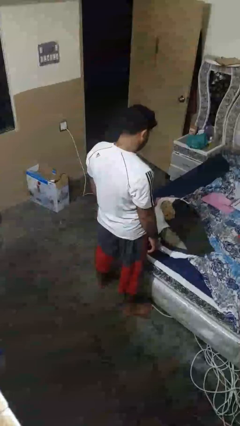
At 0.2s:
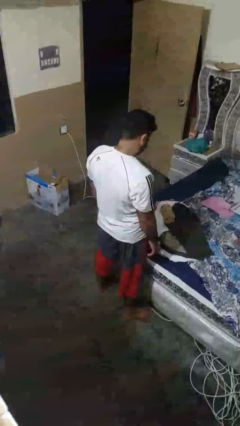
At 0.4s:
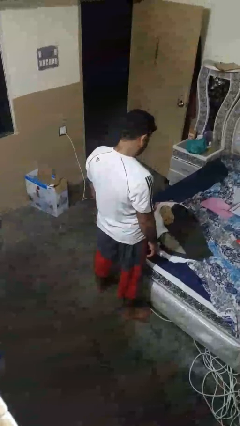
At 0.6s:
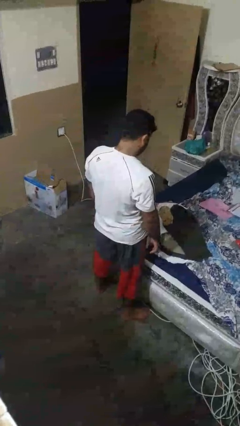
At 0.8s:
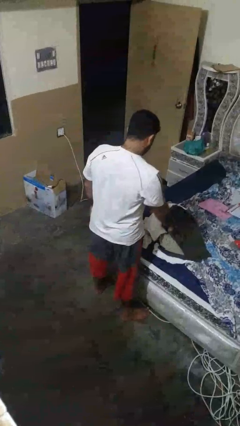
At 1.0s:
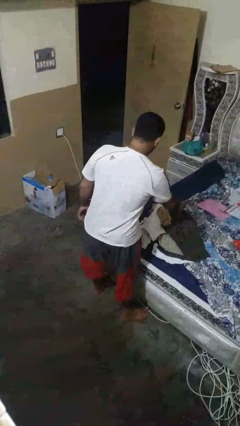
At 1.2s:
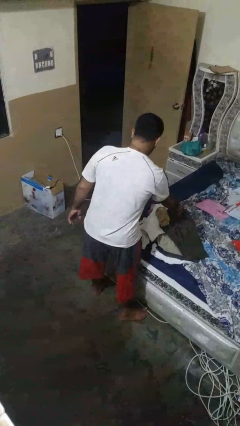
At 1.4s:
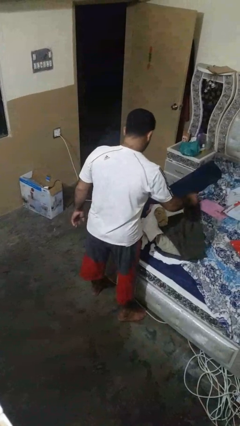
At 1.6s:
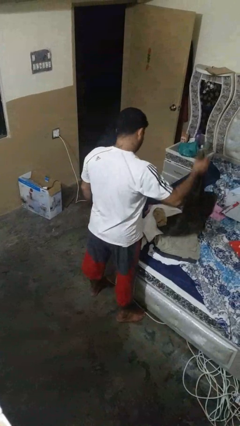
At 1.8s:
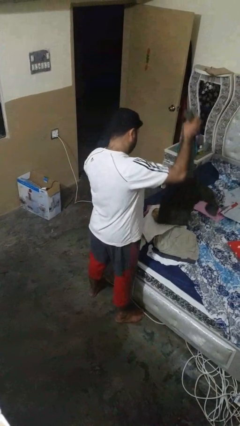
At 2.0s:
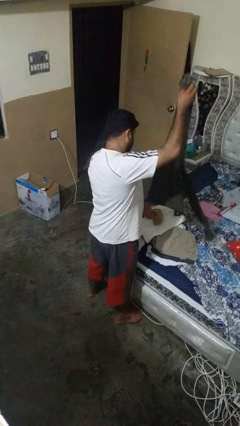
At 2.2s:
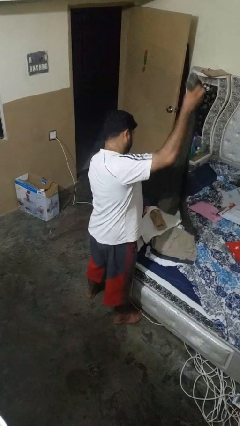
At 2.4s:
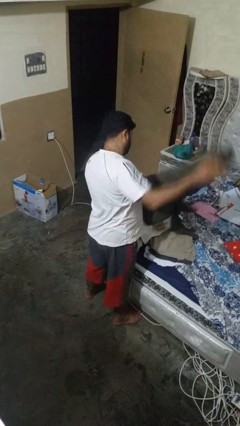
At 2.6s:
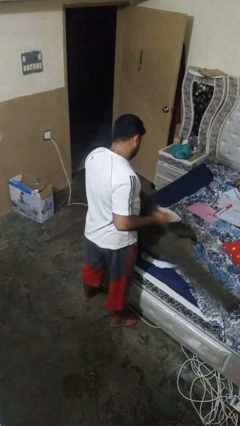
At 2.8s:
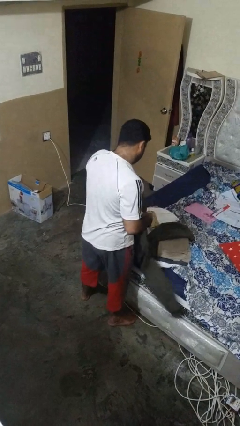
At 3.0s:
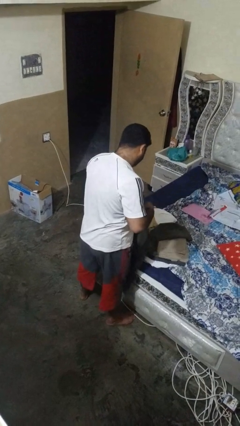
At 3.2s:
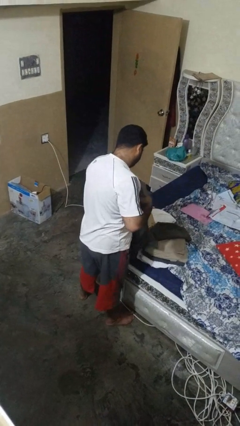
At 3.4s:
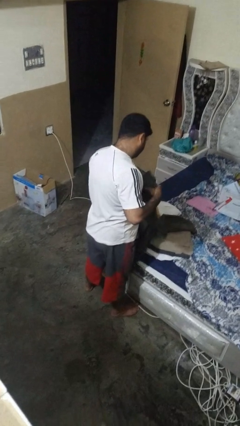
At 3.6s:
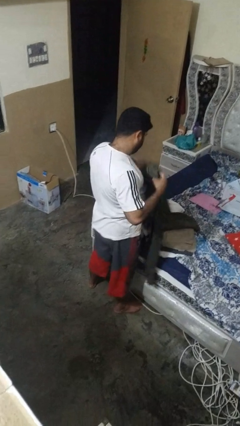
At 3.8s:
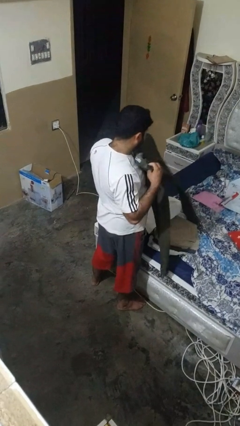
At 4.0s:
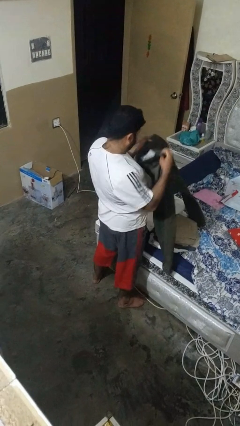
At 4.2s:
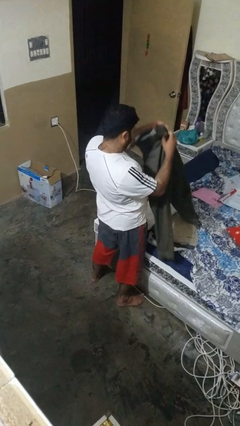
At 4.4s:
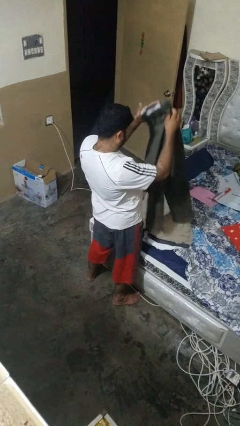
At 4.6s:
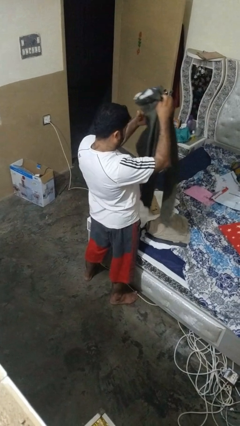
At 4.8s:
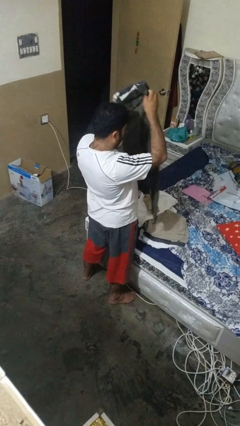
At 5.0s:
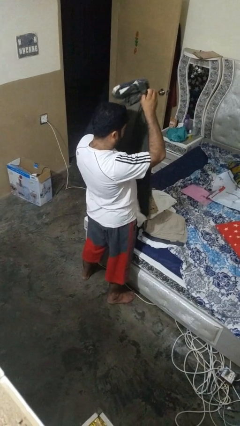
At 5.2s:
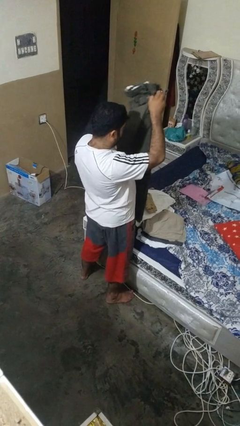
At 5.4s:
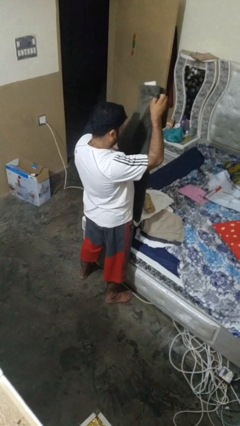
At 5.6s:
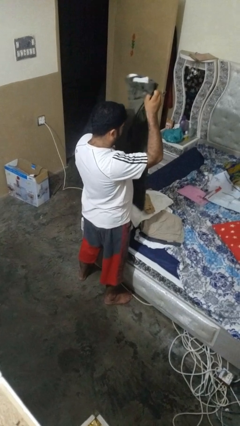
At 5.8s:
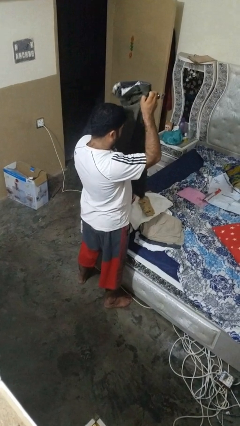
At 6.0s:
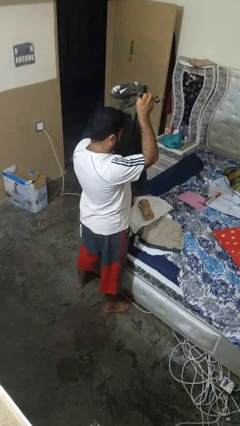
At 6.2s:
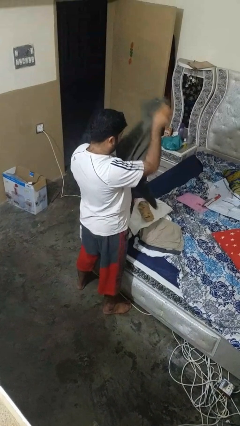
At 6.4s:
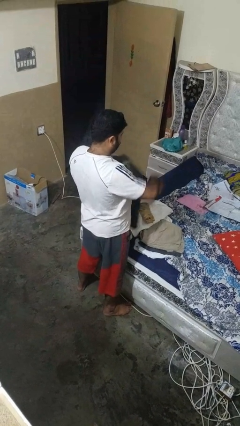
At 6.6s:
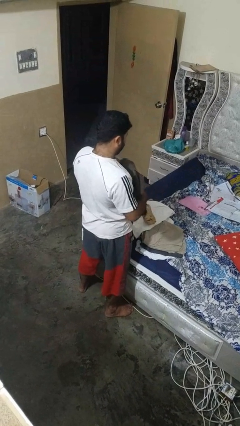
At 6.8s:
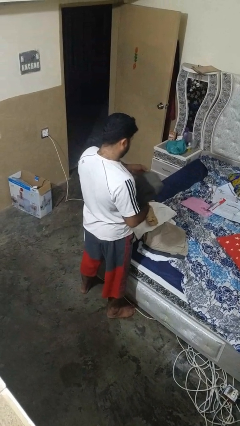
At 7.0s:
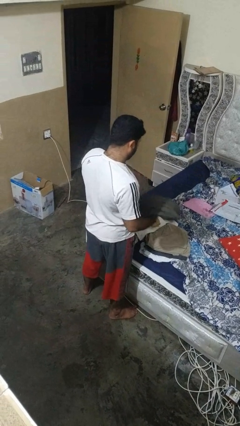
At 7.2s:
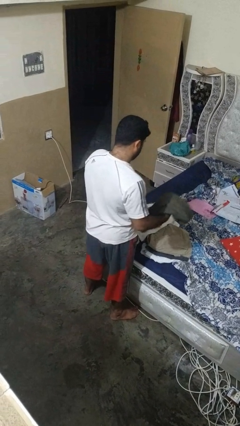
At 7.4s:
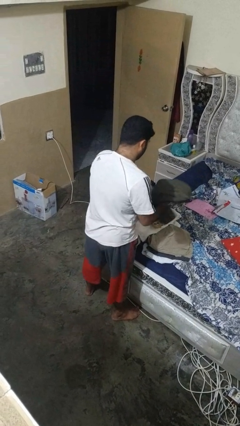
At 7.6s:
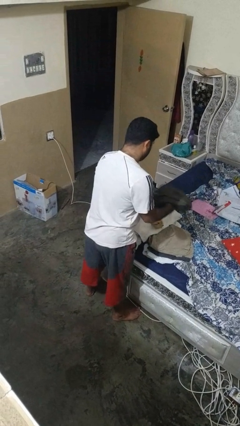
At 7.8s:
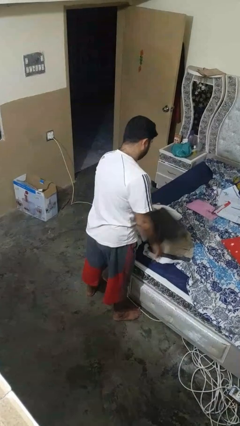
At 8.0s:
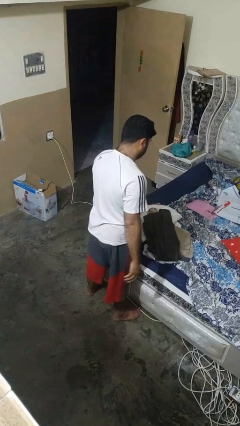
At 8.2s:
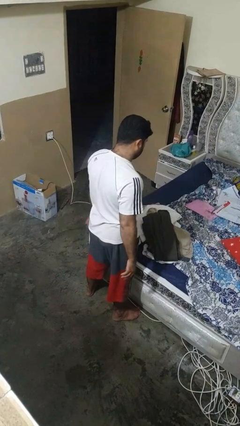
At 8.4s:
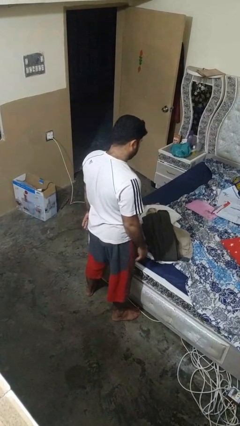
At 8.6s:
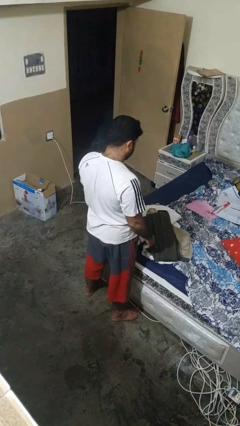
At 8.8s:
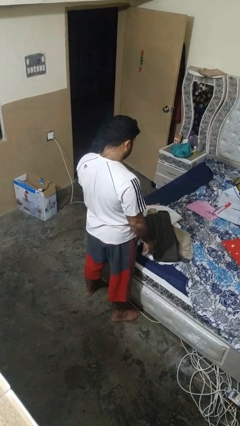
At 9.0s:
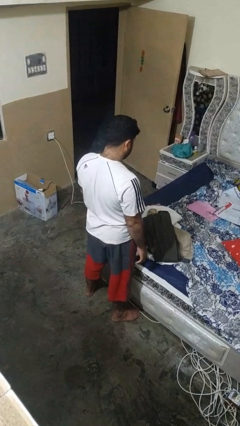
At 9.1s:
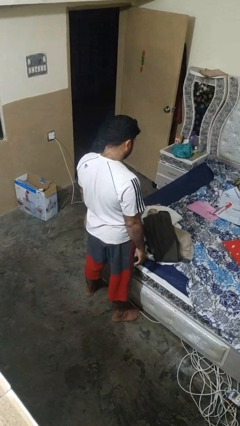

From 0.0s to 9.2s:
person folds pants

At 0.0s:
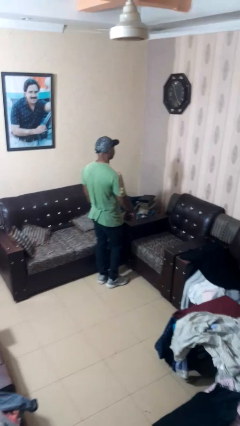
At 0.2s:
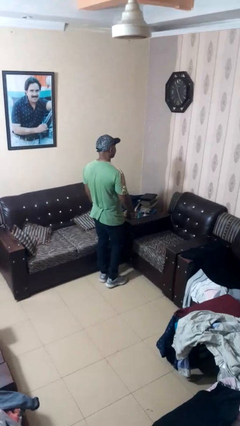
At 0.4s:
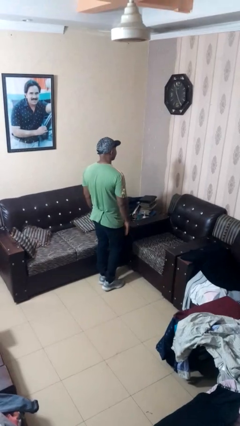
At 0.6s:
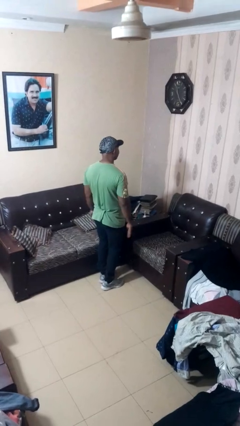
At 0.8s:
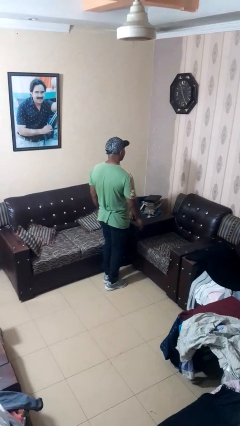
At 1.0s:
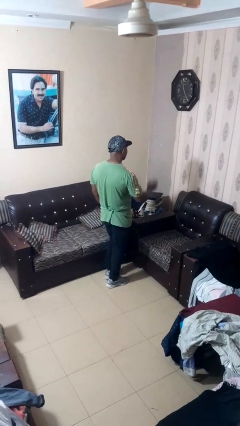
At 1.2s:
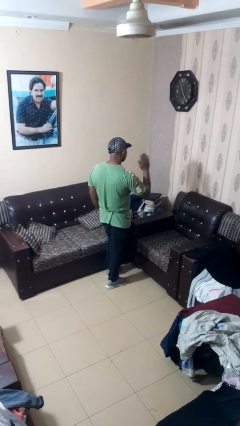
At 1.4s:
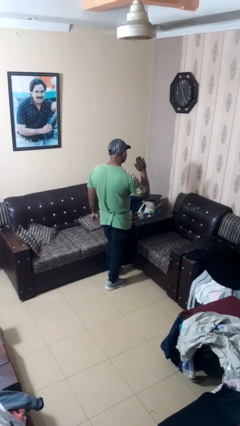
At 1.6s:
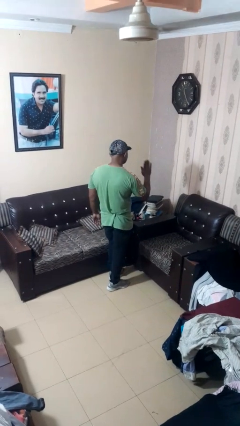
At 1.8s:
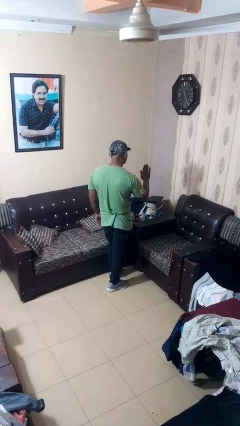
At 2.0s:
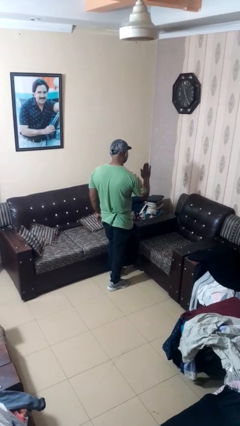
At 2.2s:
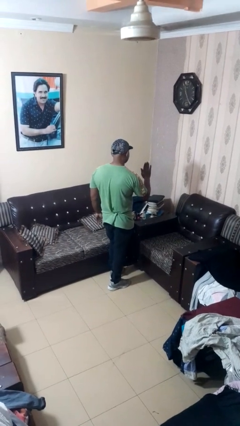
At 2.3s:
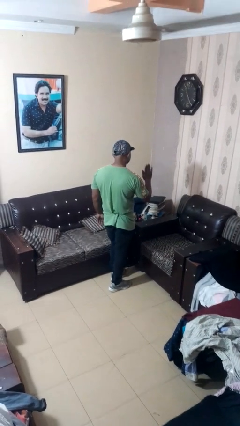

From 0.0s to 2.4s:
person gestures stop

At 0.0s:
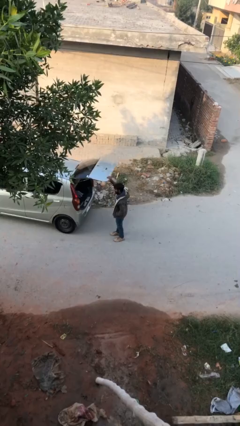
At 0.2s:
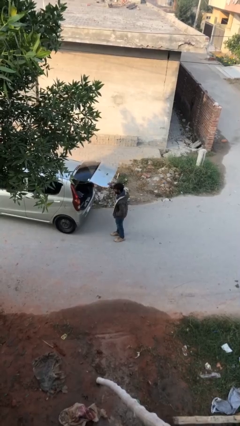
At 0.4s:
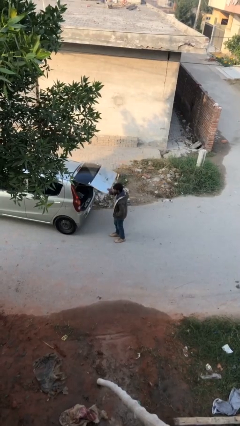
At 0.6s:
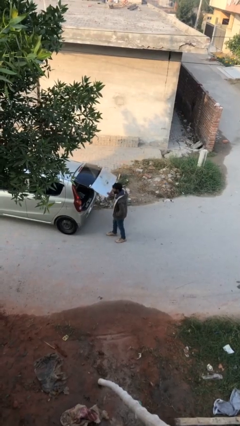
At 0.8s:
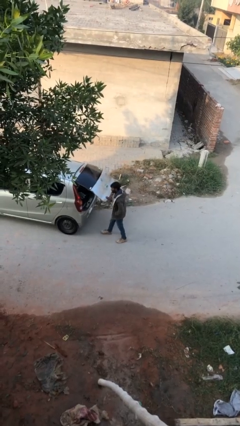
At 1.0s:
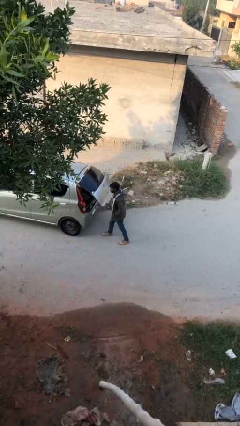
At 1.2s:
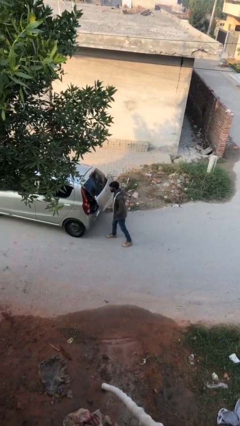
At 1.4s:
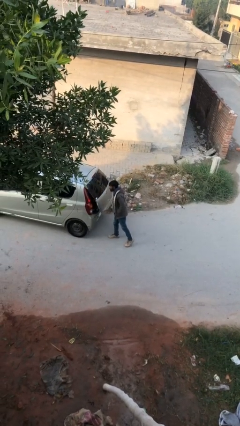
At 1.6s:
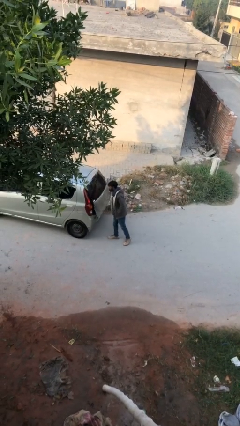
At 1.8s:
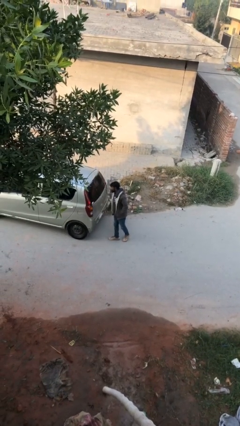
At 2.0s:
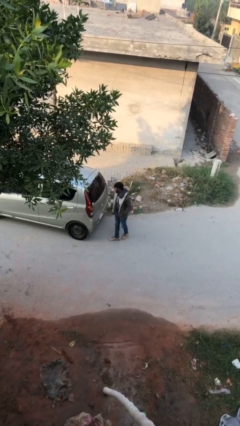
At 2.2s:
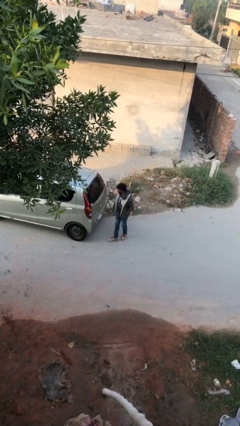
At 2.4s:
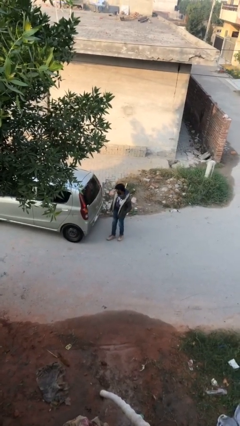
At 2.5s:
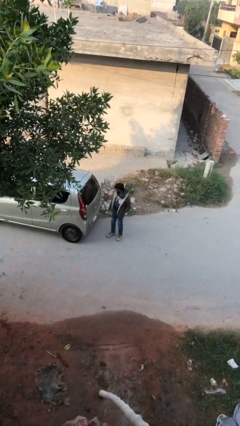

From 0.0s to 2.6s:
person closes car trunk

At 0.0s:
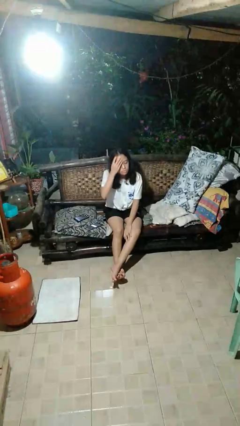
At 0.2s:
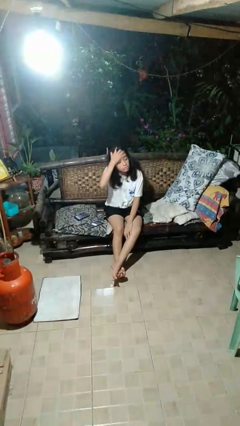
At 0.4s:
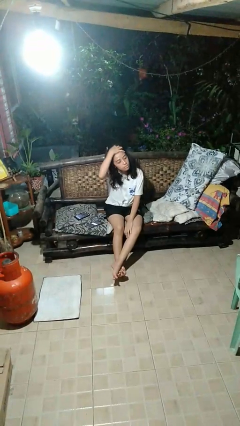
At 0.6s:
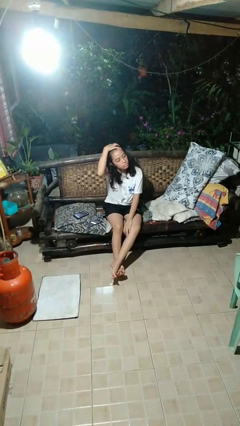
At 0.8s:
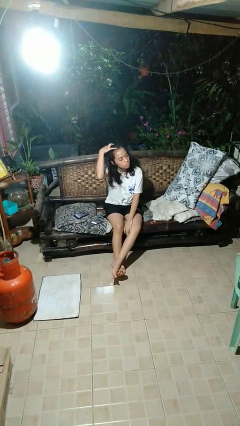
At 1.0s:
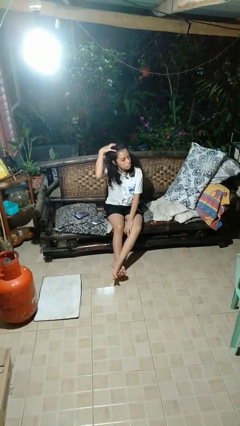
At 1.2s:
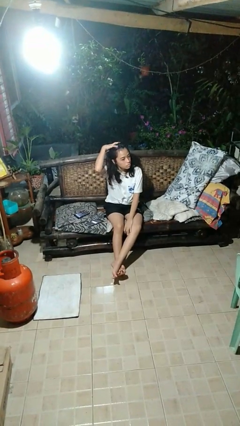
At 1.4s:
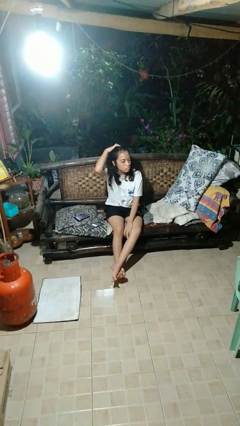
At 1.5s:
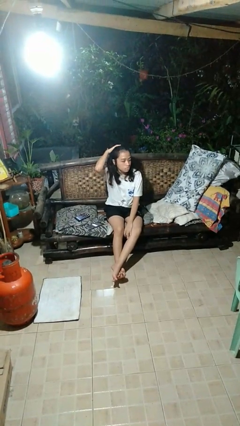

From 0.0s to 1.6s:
person strokes hair

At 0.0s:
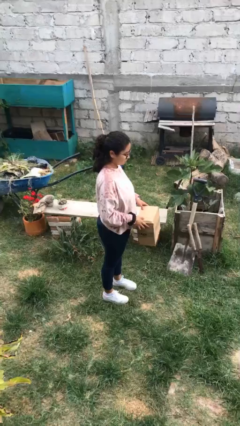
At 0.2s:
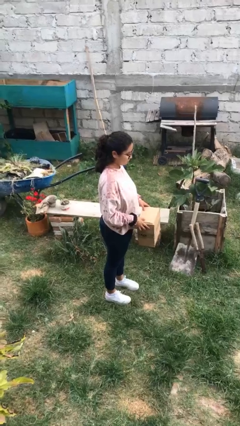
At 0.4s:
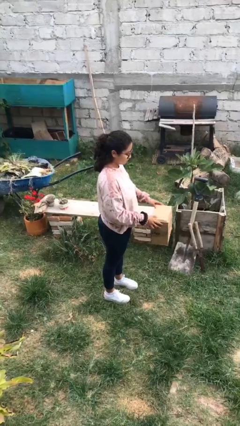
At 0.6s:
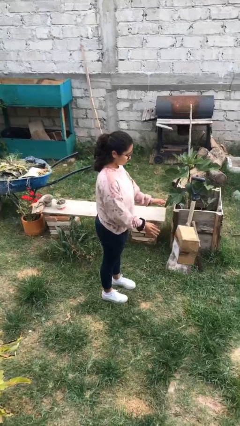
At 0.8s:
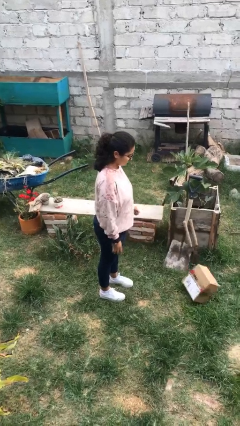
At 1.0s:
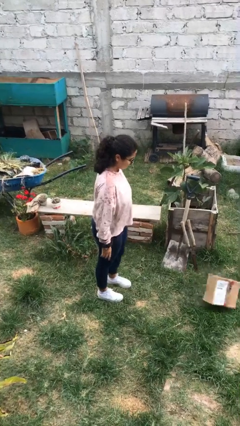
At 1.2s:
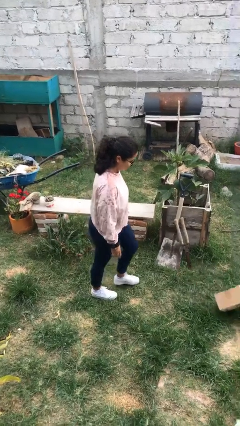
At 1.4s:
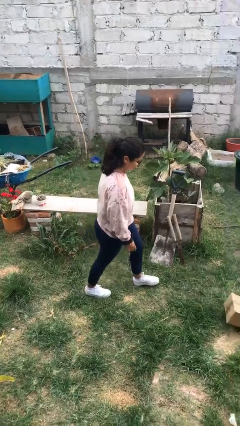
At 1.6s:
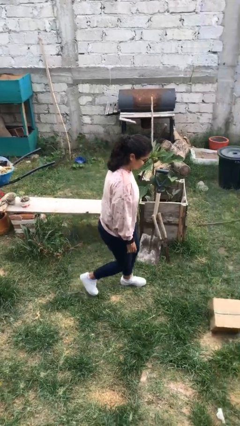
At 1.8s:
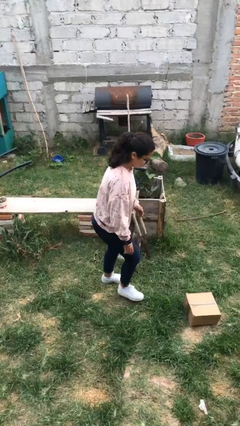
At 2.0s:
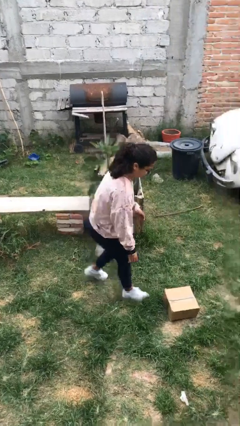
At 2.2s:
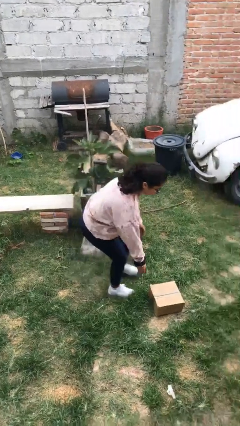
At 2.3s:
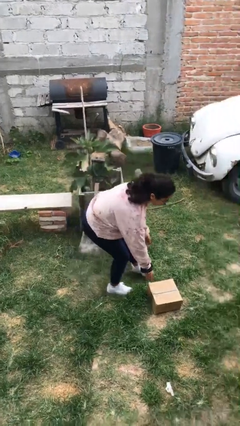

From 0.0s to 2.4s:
person throws object to ground
